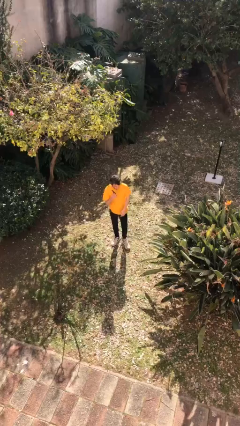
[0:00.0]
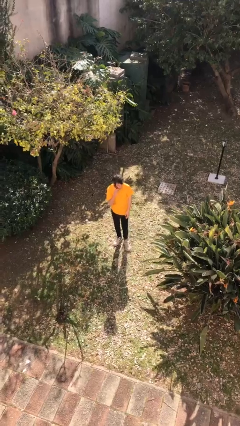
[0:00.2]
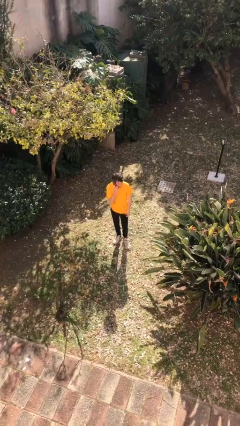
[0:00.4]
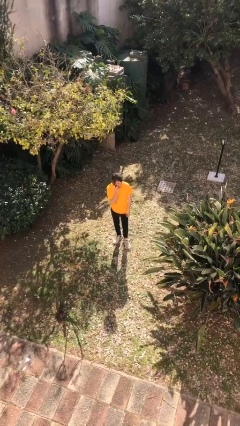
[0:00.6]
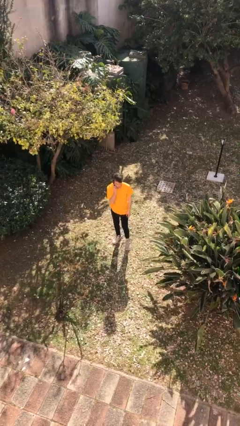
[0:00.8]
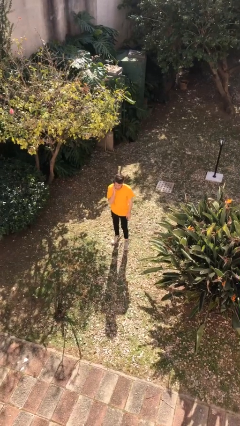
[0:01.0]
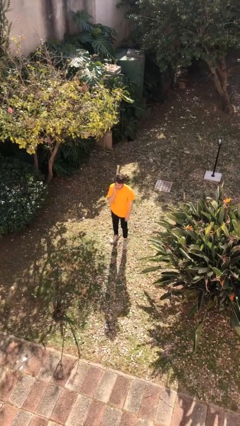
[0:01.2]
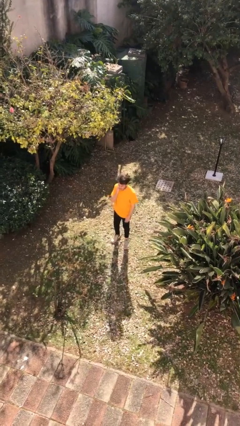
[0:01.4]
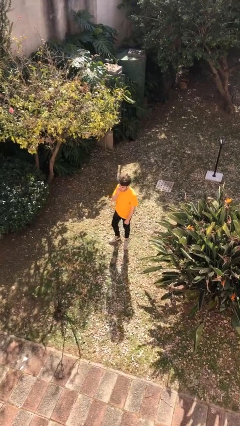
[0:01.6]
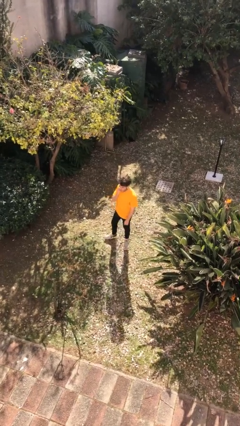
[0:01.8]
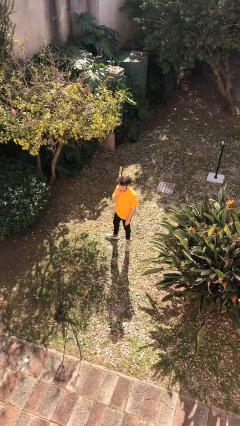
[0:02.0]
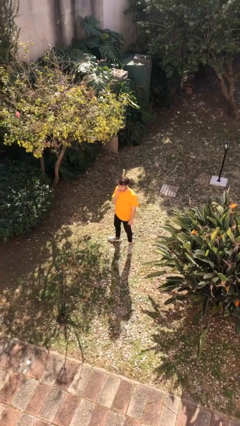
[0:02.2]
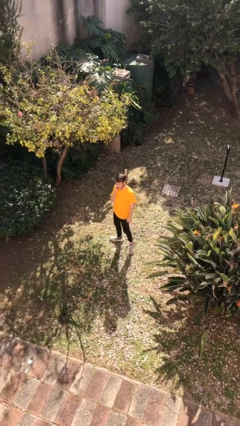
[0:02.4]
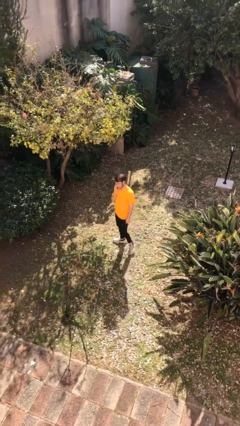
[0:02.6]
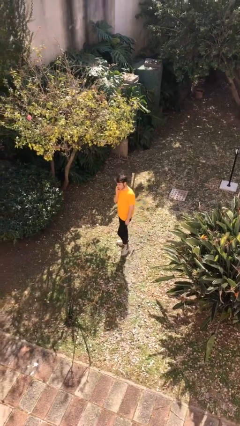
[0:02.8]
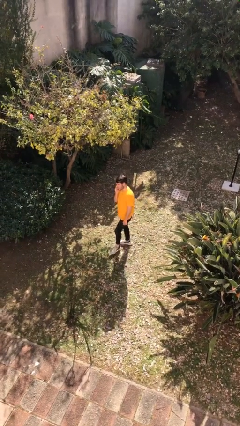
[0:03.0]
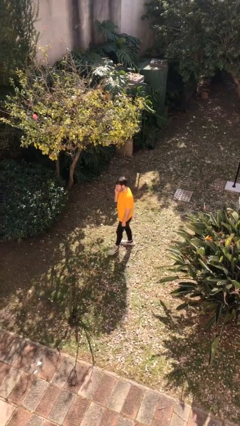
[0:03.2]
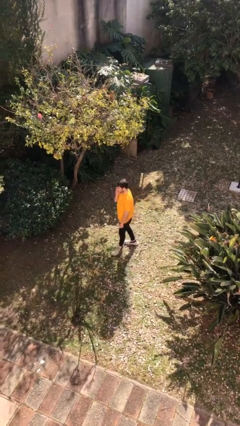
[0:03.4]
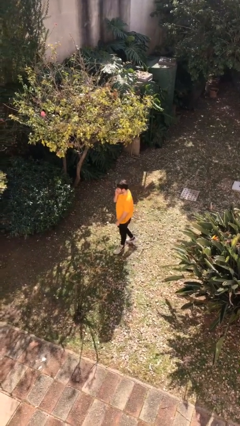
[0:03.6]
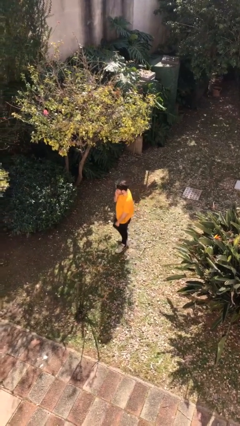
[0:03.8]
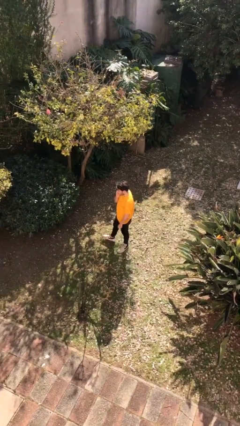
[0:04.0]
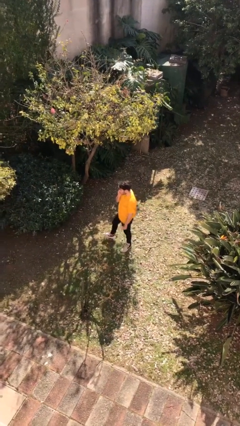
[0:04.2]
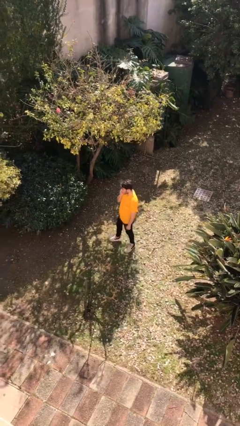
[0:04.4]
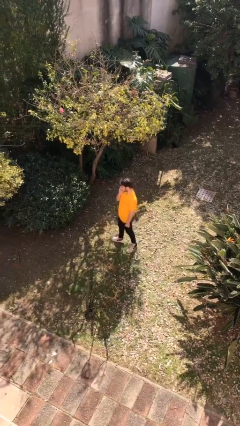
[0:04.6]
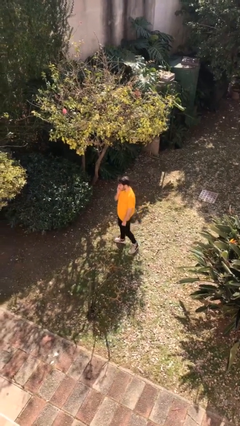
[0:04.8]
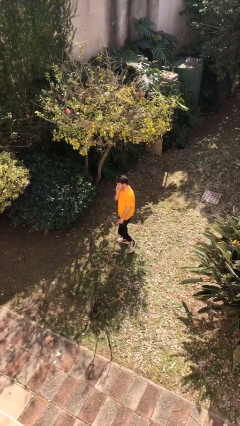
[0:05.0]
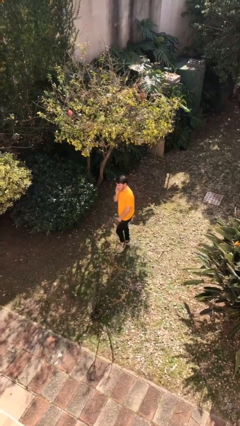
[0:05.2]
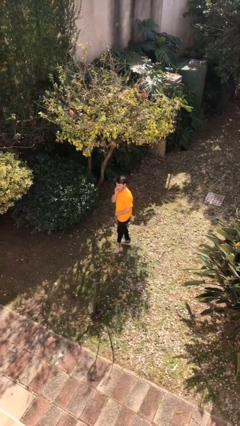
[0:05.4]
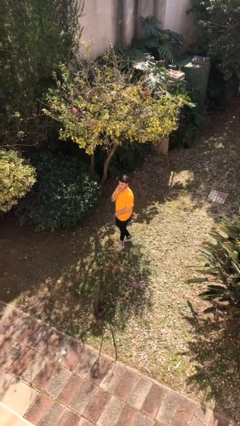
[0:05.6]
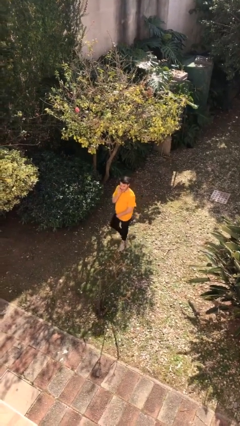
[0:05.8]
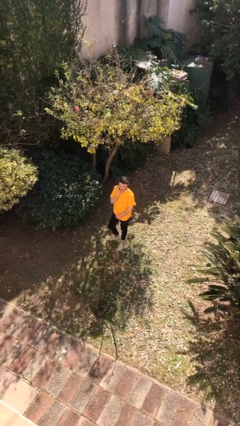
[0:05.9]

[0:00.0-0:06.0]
person talks on phone

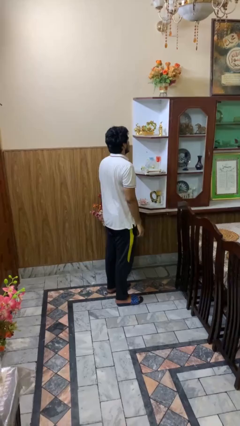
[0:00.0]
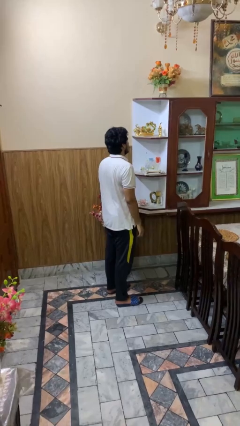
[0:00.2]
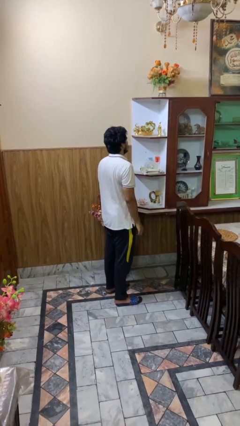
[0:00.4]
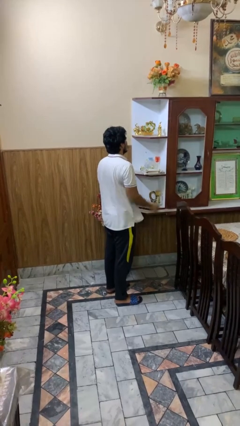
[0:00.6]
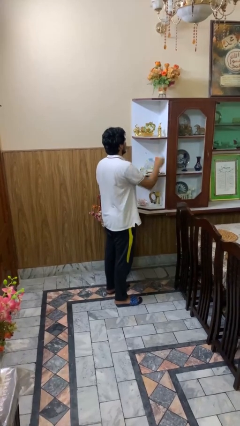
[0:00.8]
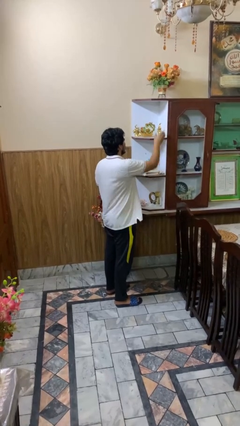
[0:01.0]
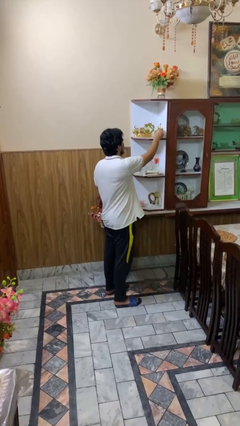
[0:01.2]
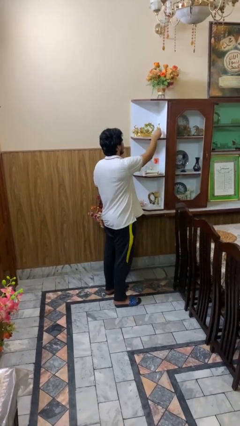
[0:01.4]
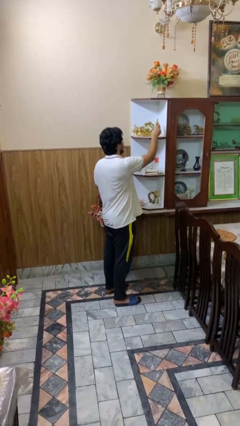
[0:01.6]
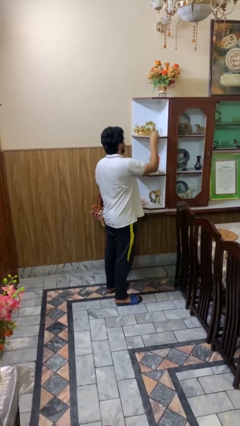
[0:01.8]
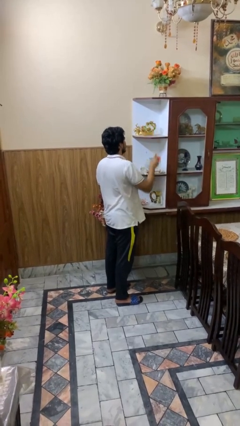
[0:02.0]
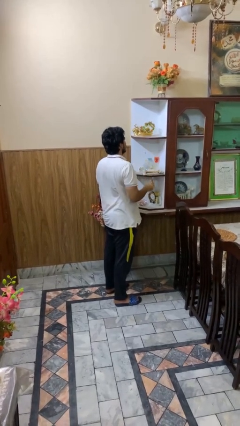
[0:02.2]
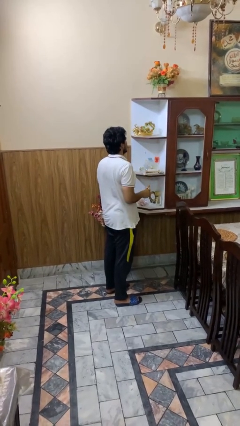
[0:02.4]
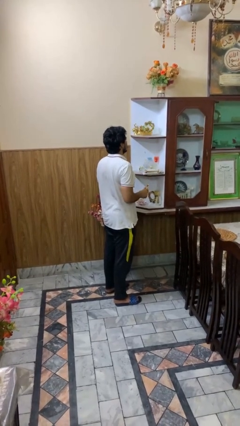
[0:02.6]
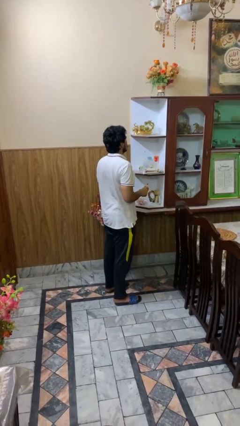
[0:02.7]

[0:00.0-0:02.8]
person picks up object from shelf

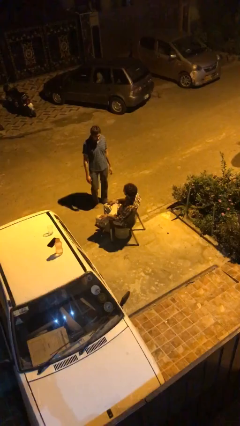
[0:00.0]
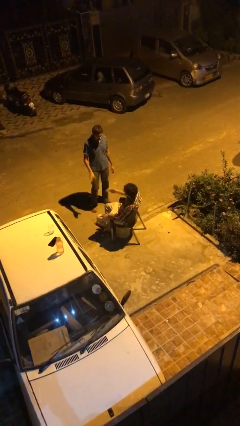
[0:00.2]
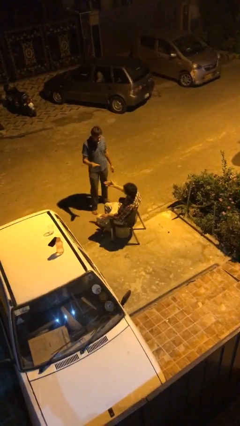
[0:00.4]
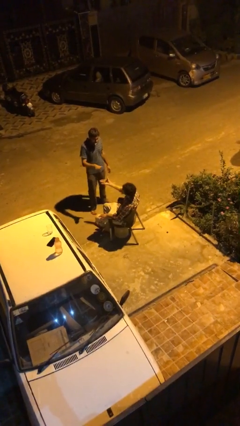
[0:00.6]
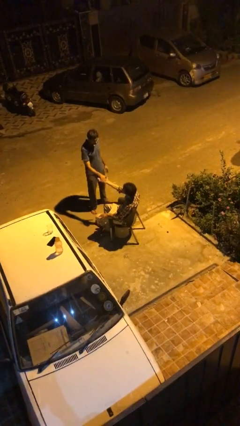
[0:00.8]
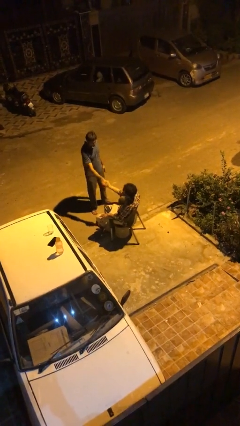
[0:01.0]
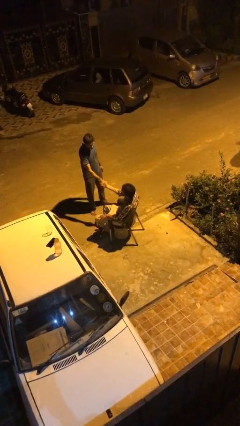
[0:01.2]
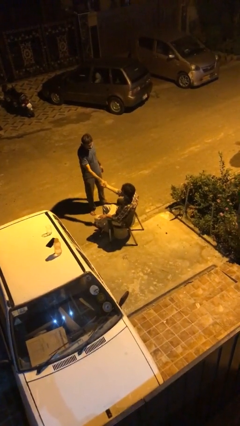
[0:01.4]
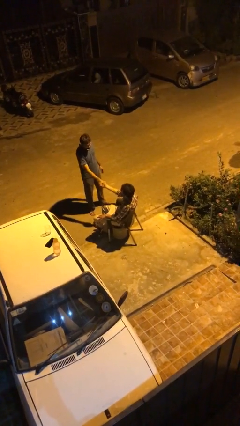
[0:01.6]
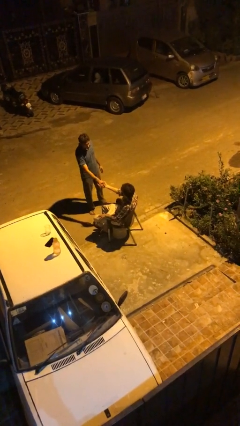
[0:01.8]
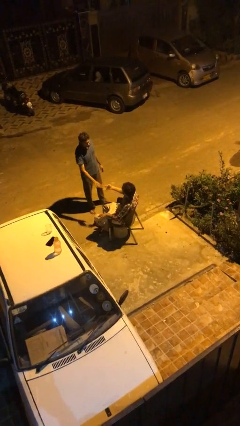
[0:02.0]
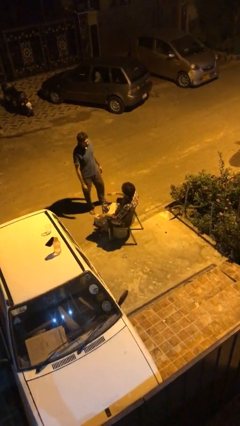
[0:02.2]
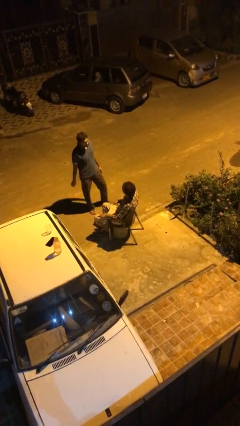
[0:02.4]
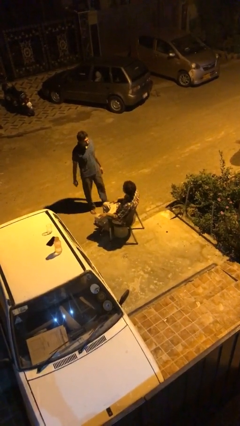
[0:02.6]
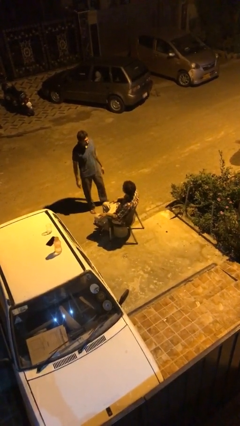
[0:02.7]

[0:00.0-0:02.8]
person shakes hand

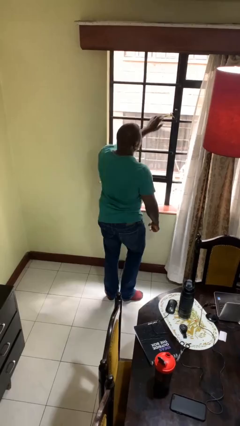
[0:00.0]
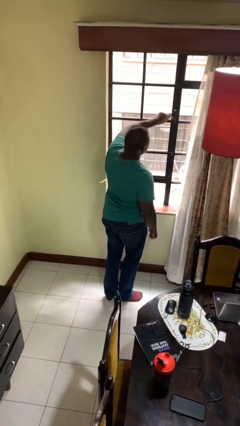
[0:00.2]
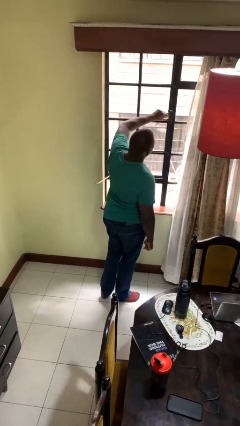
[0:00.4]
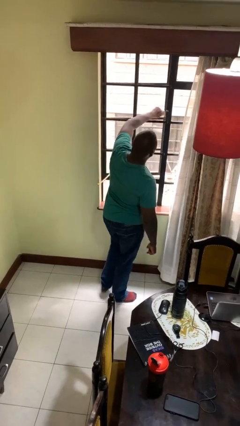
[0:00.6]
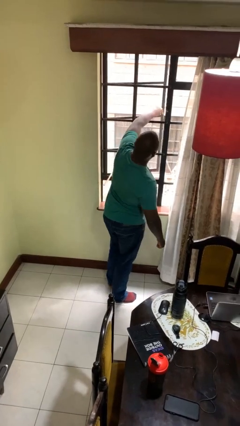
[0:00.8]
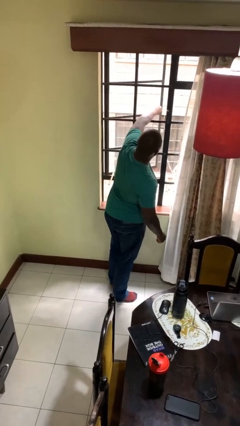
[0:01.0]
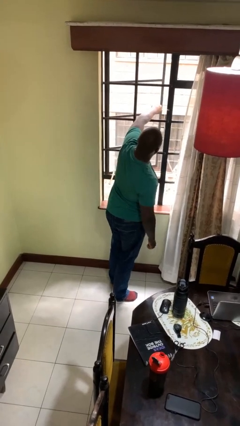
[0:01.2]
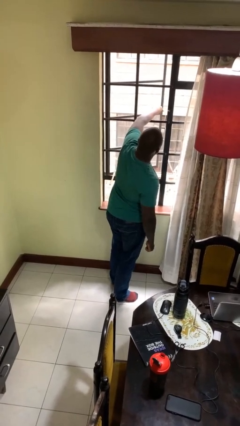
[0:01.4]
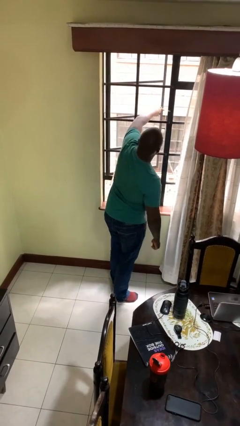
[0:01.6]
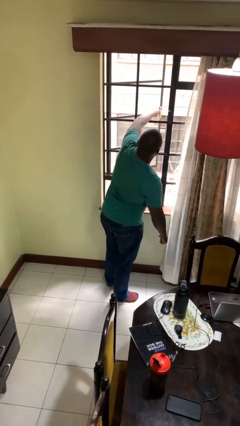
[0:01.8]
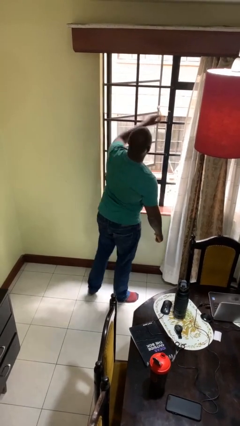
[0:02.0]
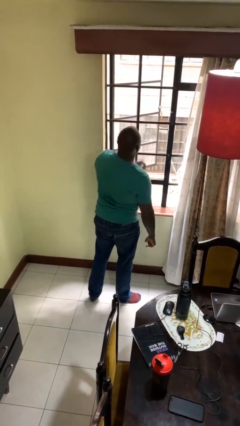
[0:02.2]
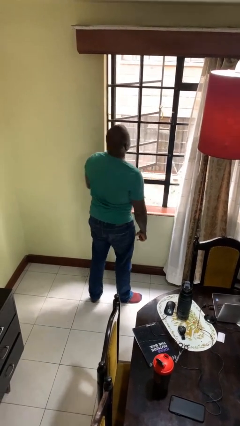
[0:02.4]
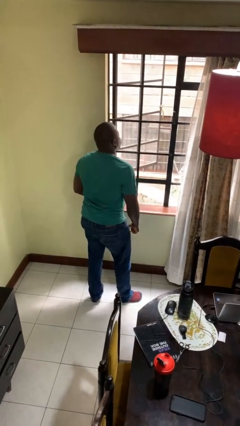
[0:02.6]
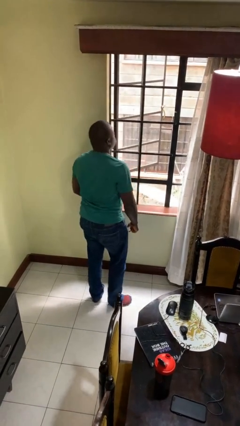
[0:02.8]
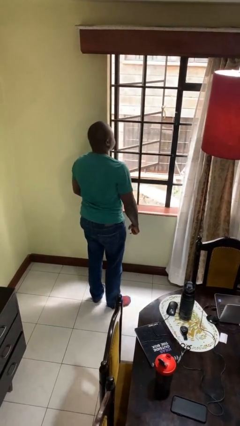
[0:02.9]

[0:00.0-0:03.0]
person opens home window

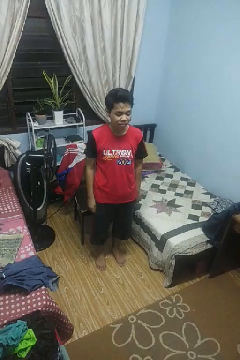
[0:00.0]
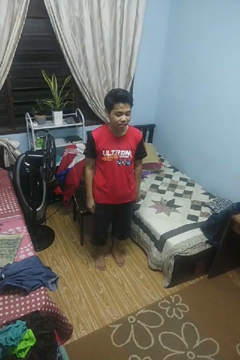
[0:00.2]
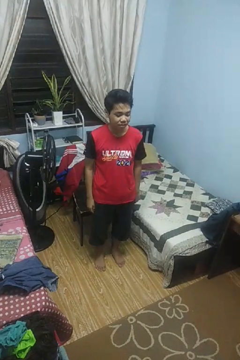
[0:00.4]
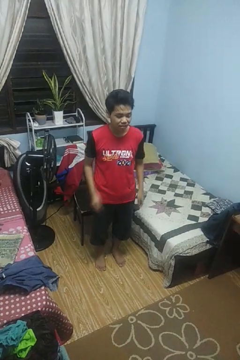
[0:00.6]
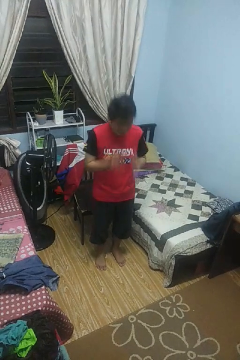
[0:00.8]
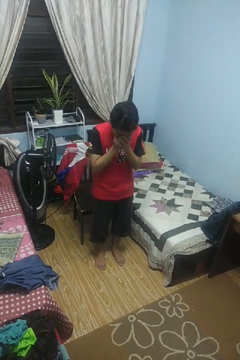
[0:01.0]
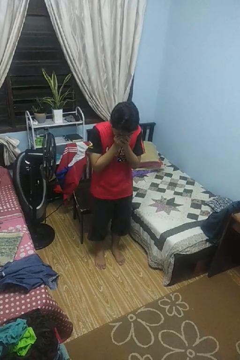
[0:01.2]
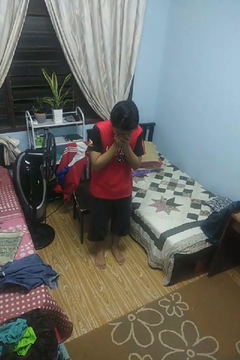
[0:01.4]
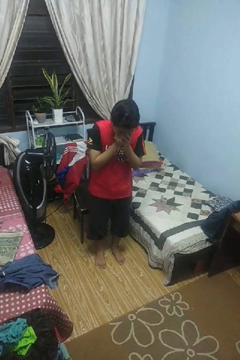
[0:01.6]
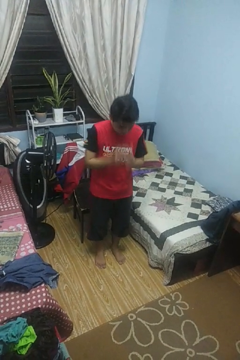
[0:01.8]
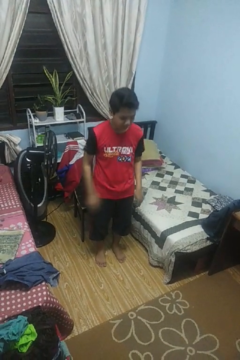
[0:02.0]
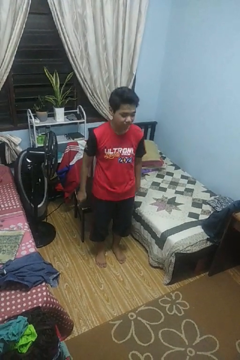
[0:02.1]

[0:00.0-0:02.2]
person sneezes into hand

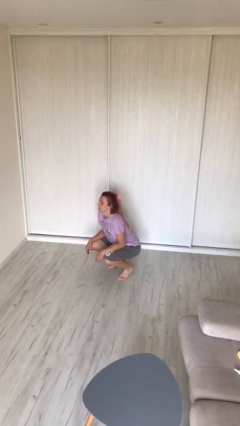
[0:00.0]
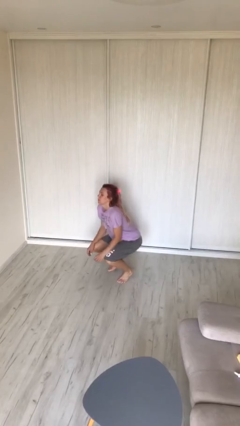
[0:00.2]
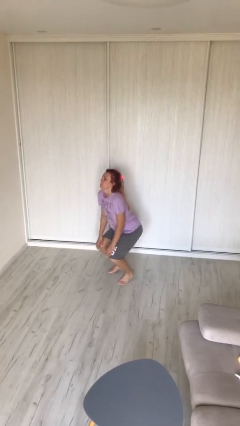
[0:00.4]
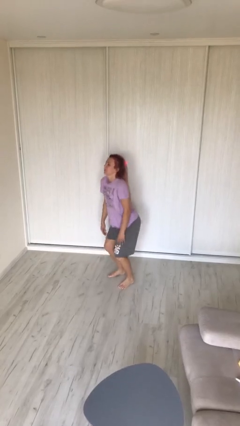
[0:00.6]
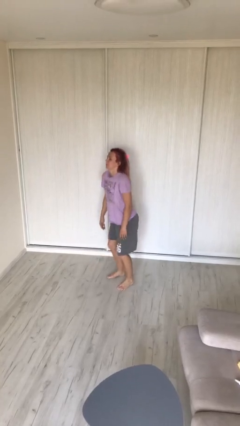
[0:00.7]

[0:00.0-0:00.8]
person stands up

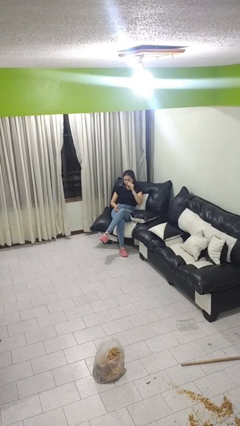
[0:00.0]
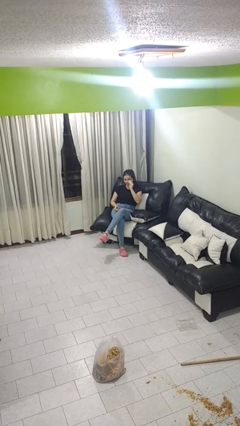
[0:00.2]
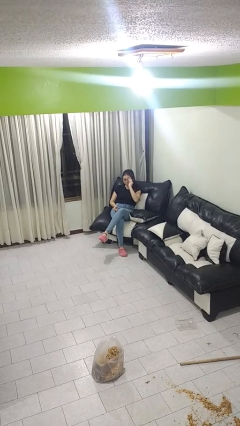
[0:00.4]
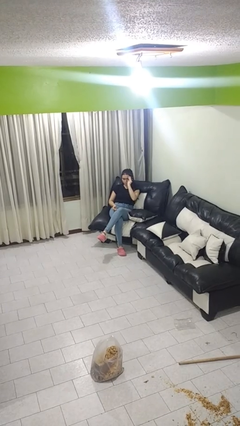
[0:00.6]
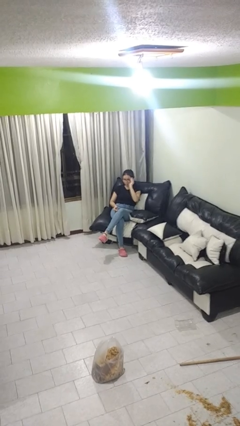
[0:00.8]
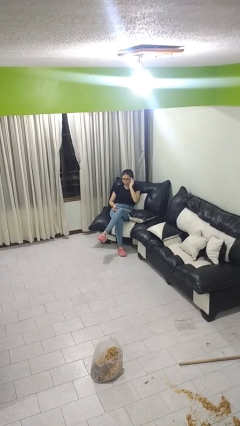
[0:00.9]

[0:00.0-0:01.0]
person puts on glasses
